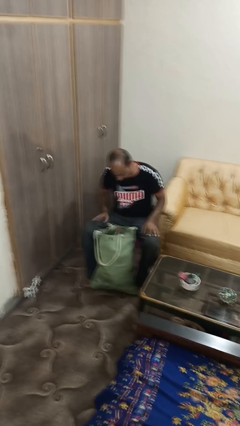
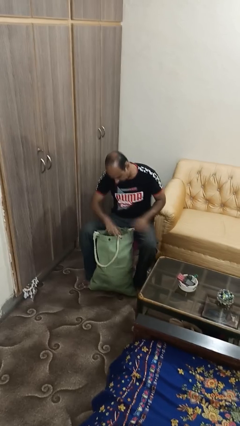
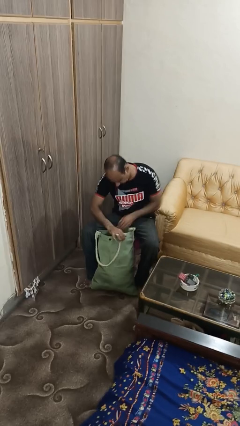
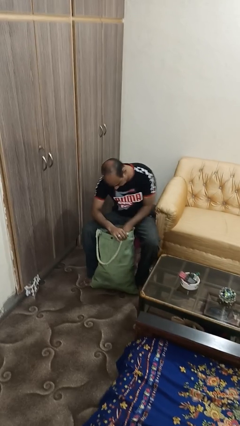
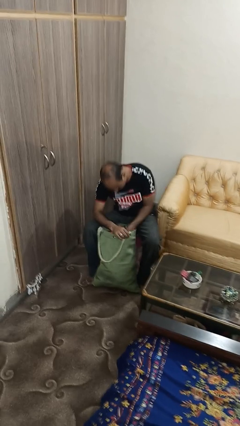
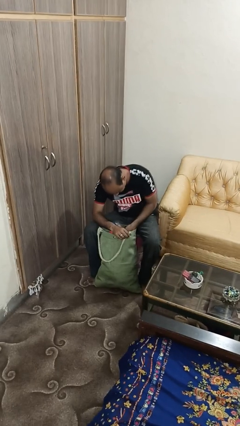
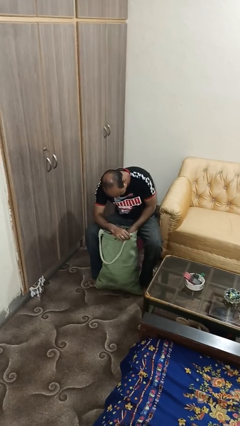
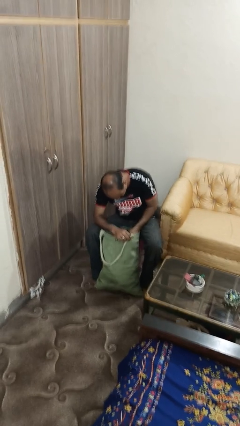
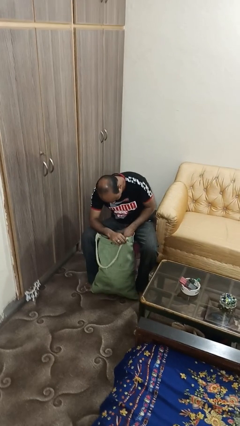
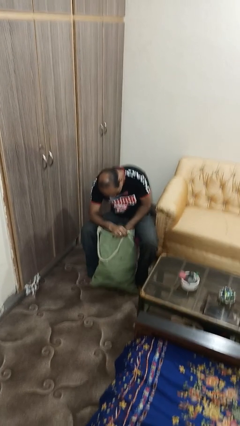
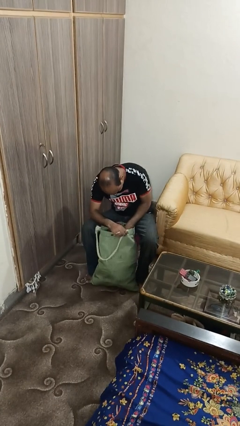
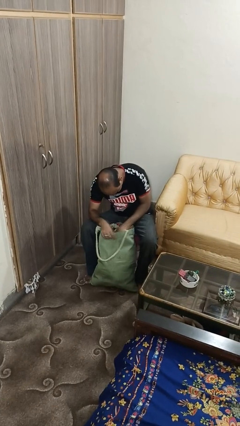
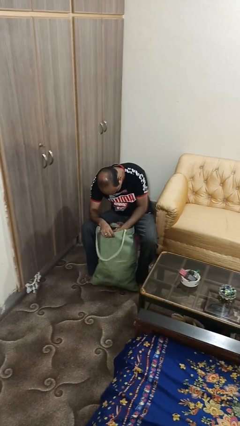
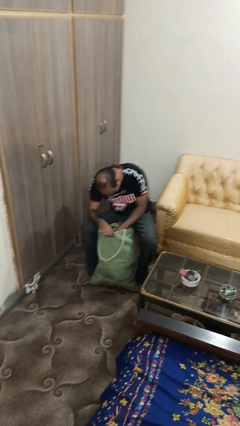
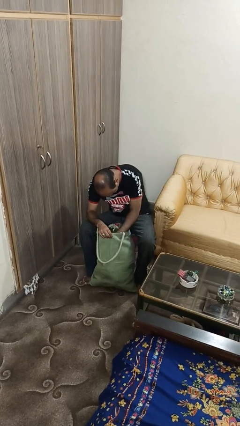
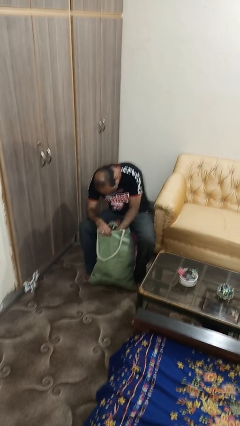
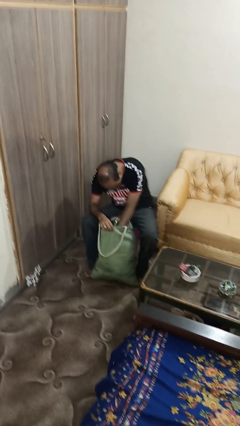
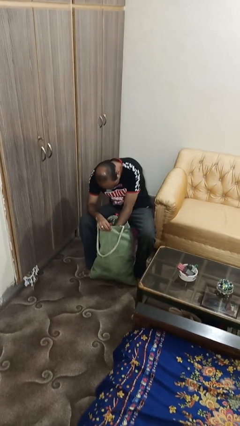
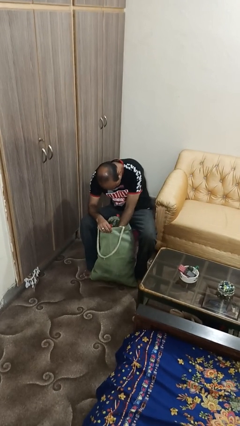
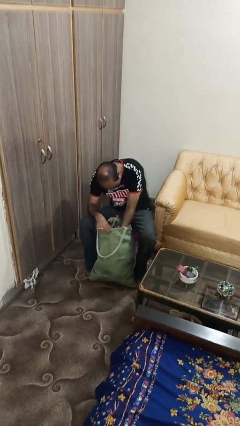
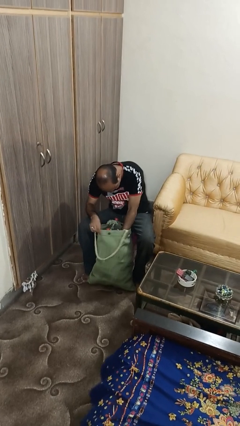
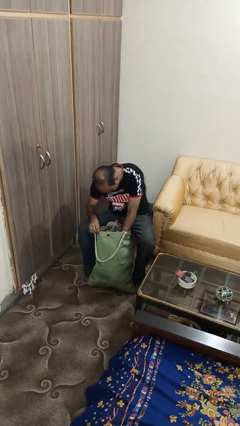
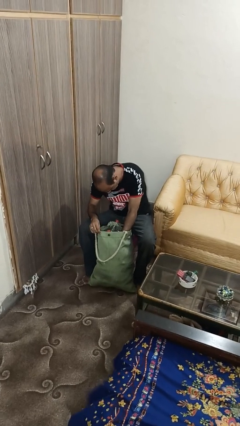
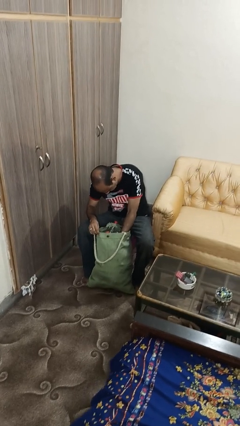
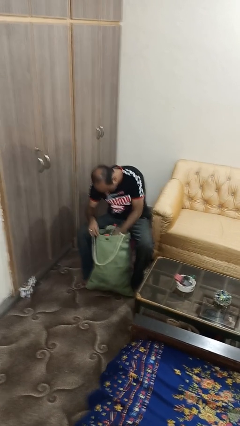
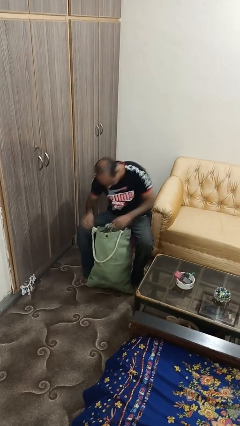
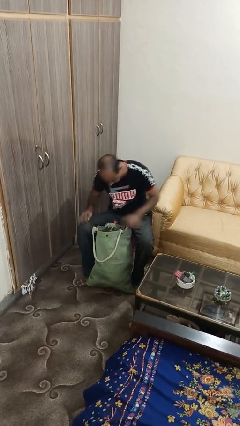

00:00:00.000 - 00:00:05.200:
person searches in bag

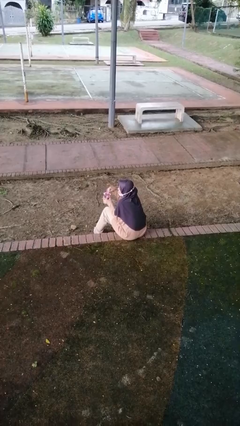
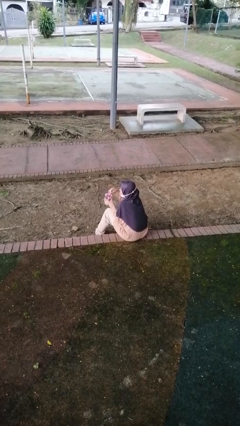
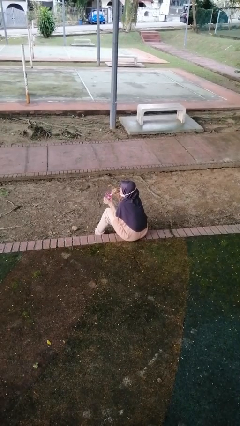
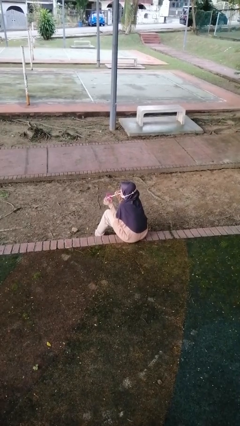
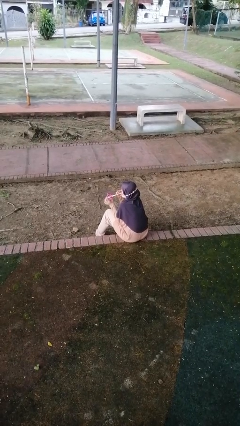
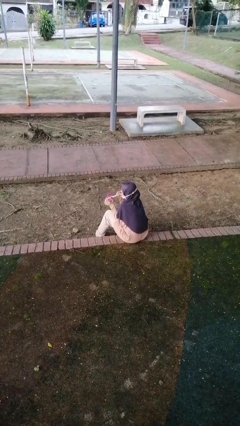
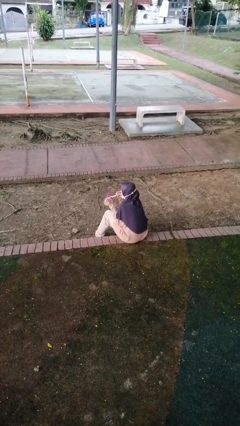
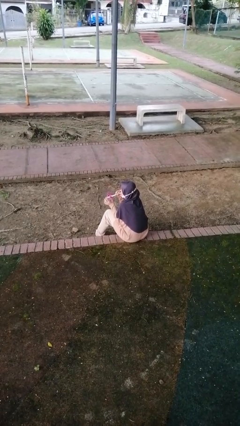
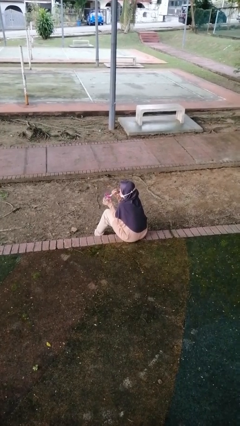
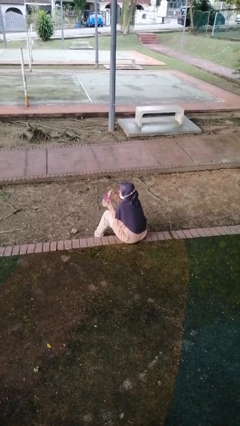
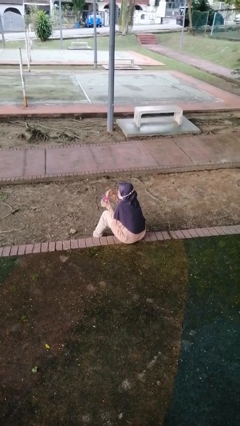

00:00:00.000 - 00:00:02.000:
person drinks from straw

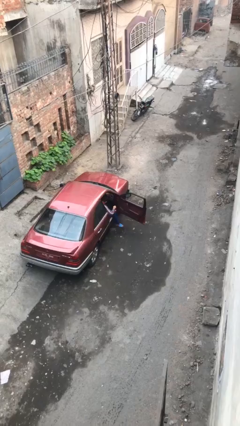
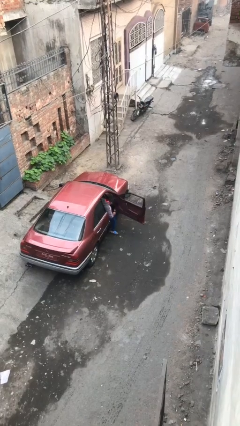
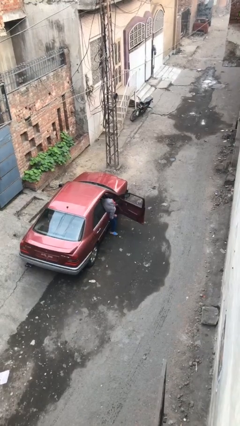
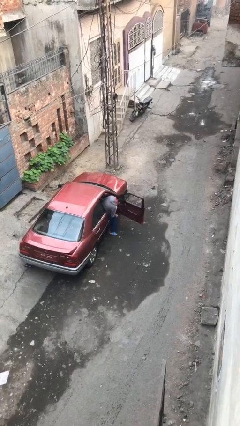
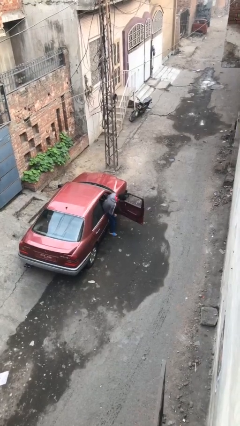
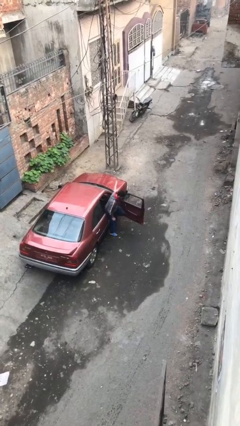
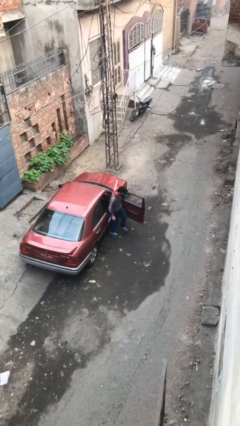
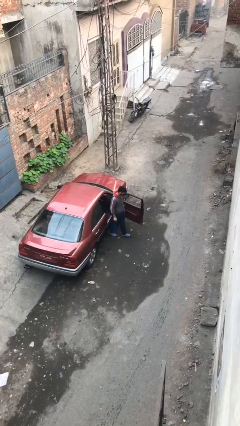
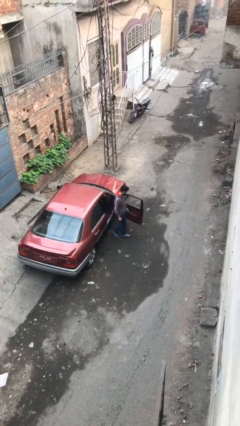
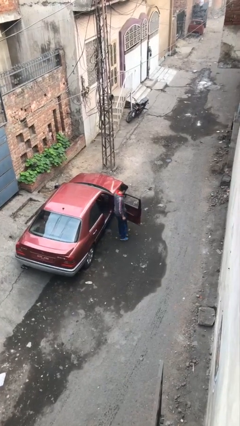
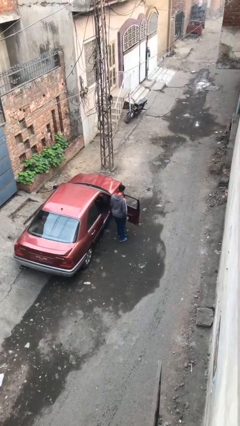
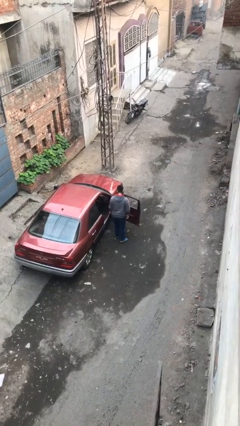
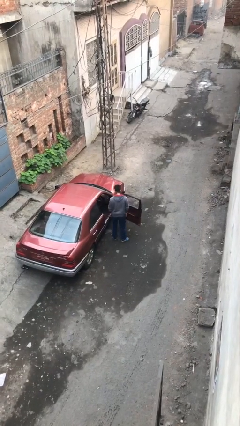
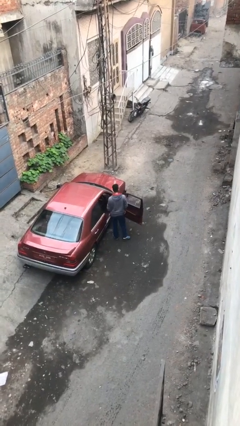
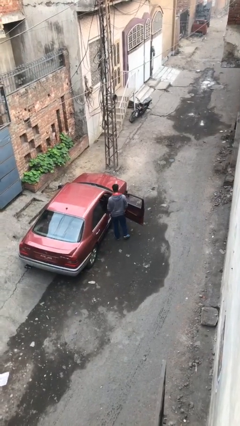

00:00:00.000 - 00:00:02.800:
person exits car

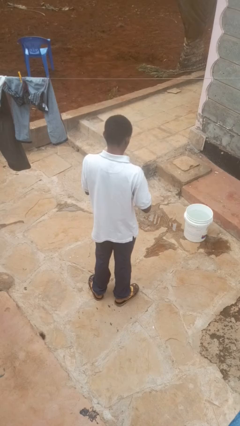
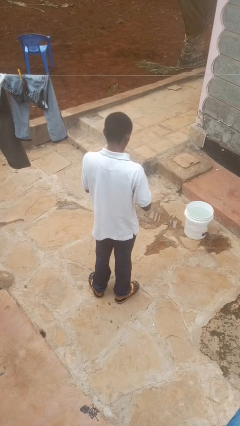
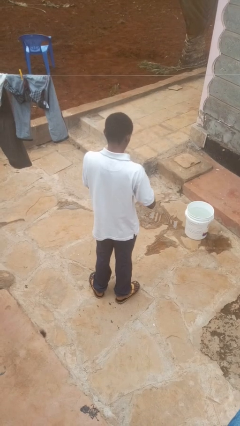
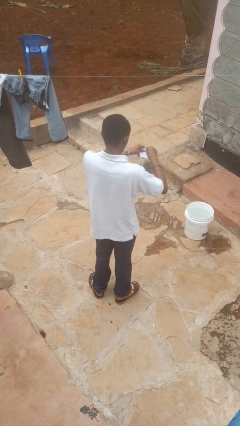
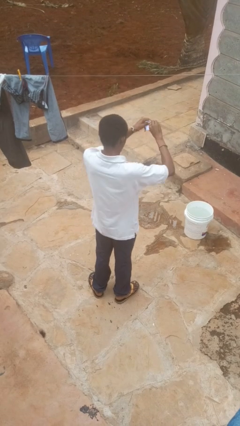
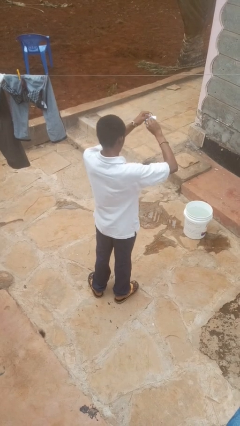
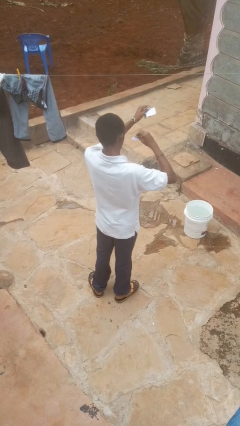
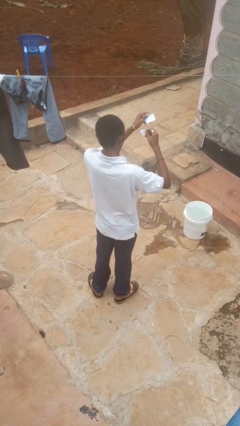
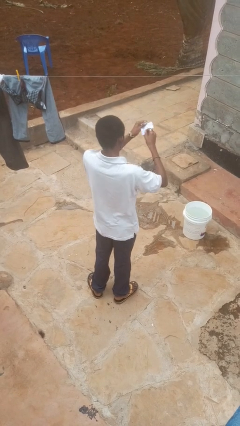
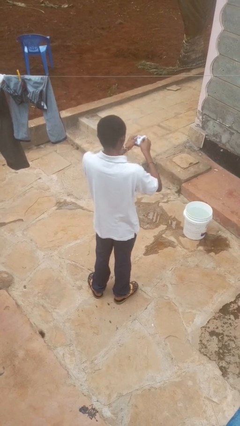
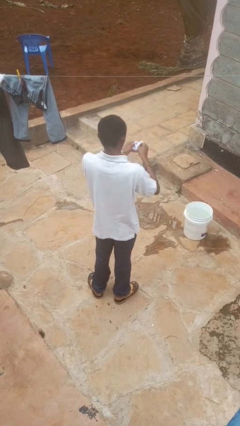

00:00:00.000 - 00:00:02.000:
person tears paper

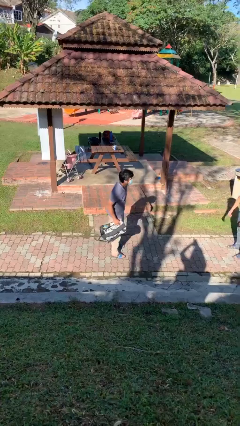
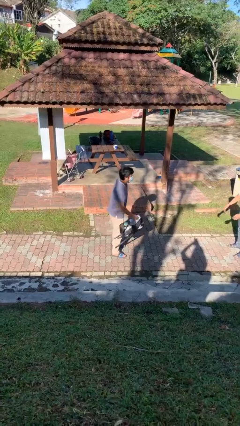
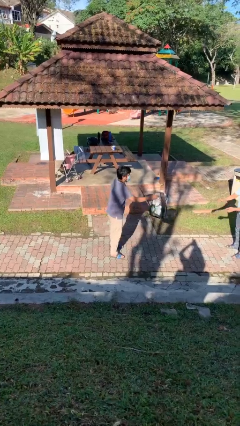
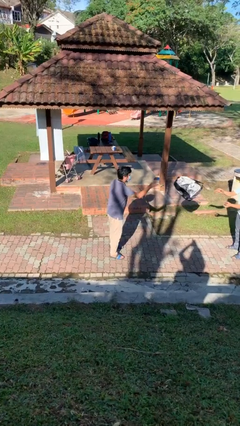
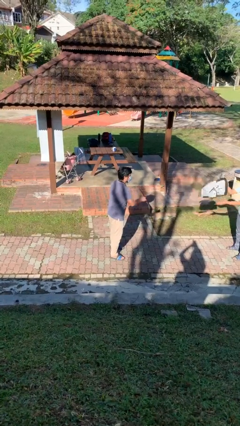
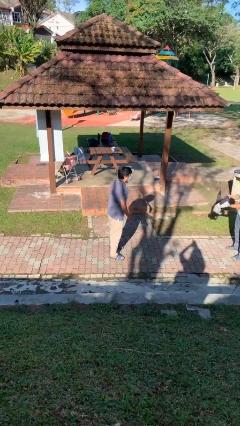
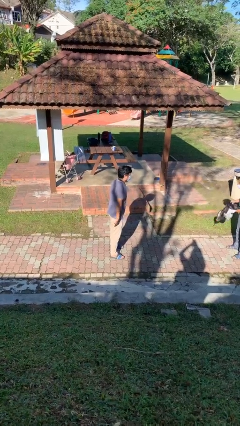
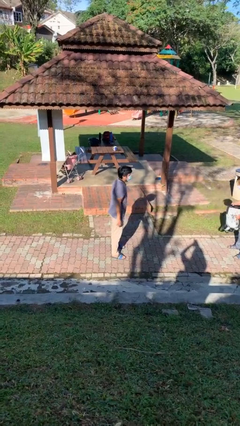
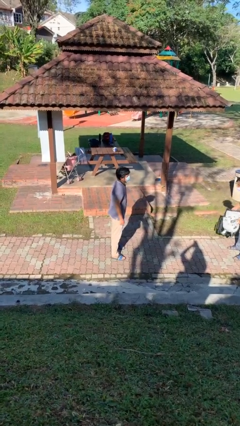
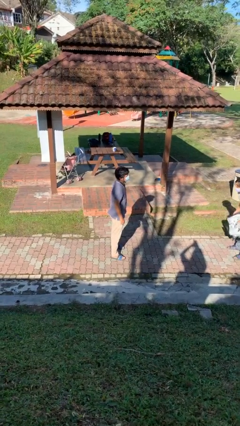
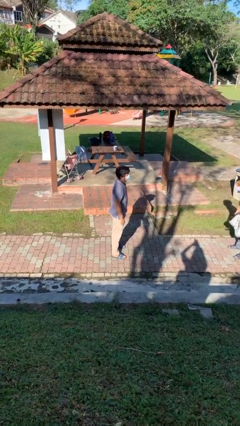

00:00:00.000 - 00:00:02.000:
person throws object to person

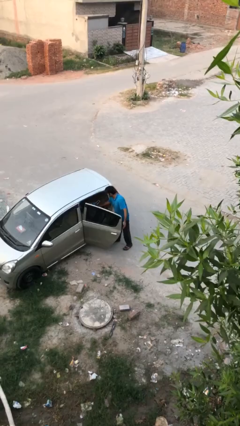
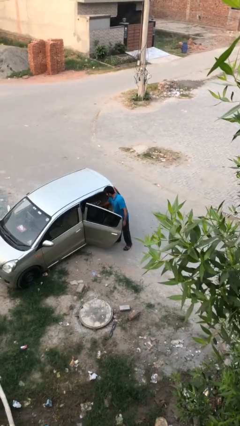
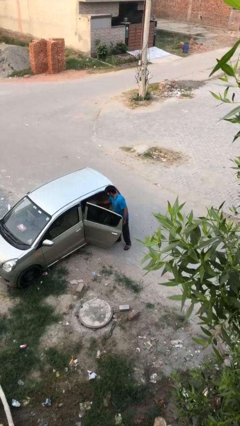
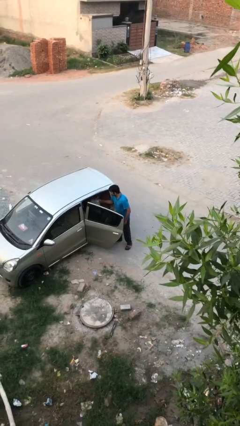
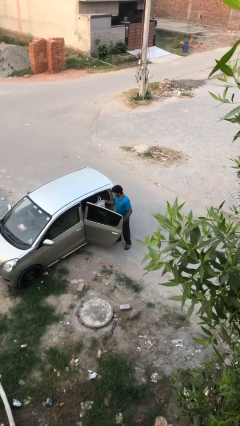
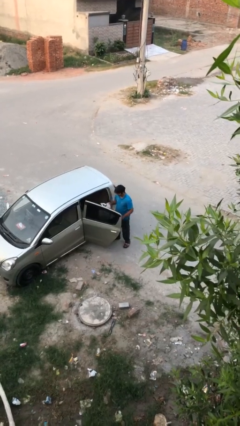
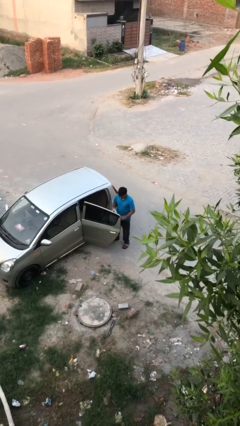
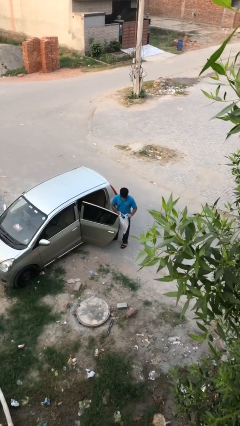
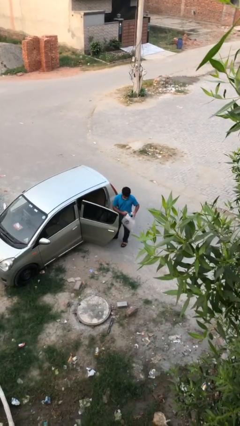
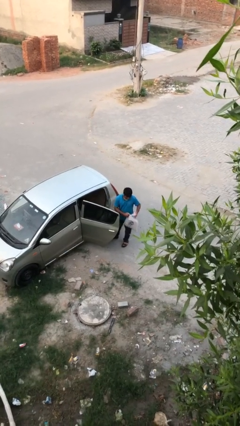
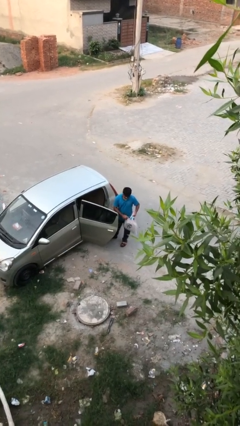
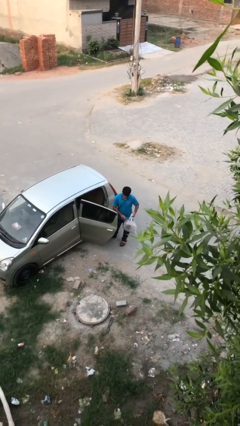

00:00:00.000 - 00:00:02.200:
person unloads car

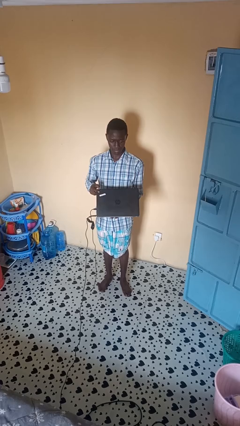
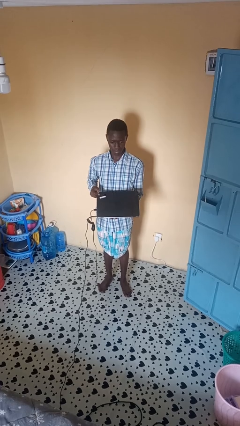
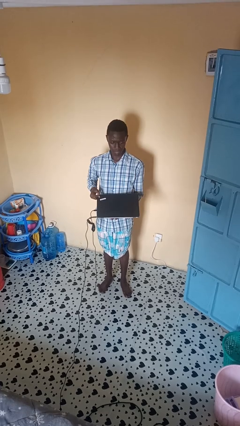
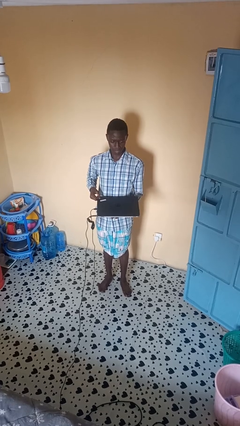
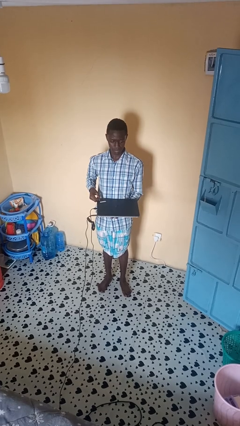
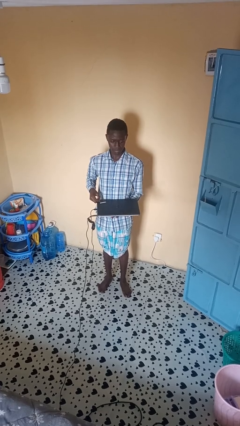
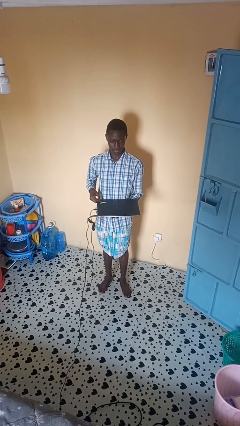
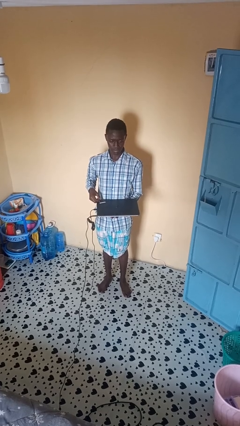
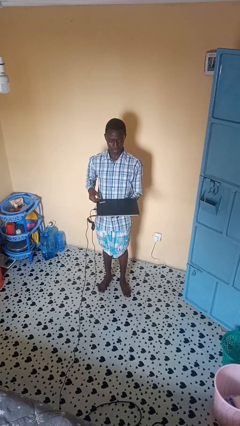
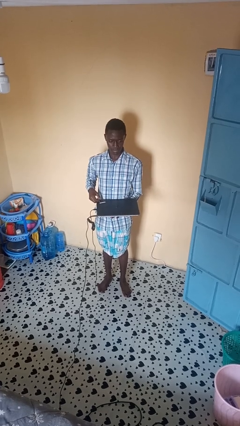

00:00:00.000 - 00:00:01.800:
person closes laptop
